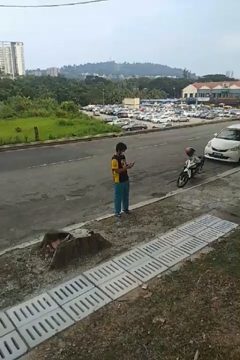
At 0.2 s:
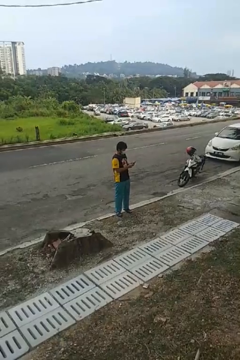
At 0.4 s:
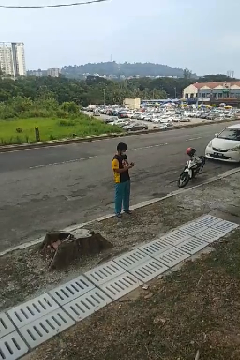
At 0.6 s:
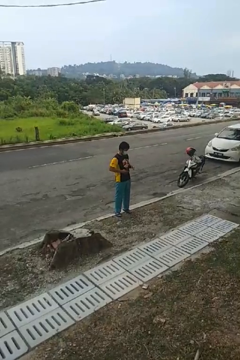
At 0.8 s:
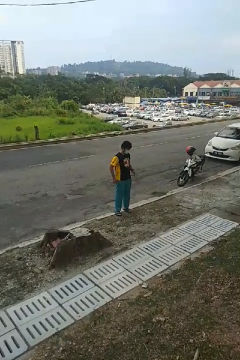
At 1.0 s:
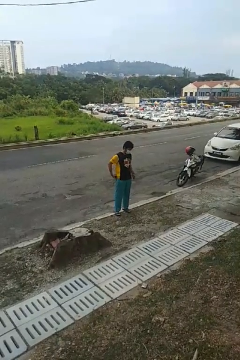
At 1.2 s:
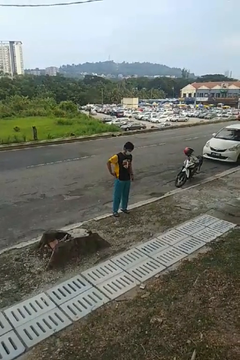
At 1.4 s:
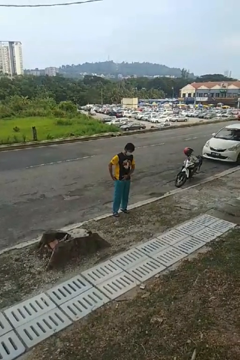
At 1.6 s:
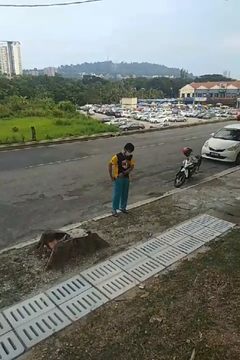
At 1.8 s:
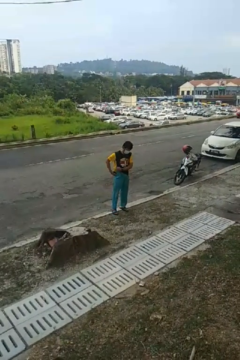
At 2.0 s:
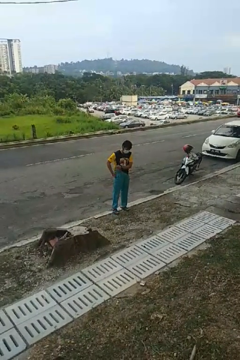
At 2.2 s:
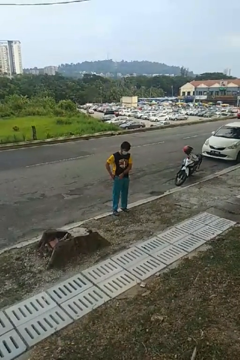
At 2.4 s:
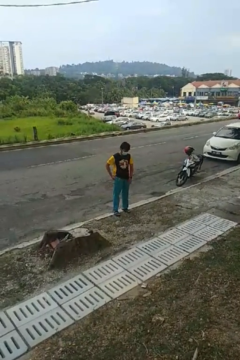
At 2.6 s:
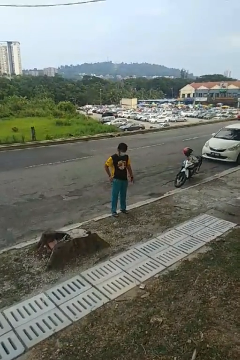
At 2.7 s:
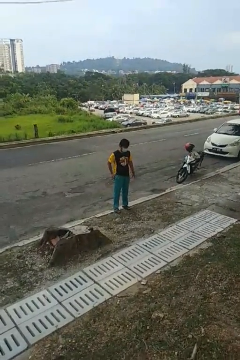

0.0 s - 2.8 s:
person puts phone into pocket

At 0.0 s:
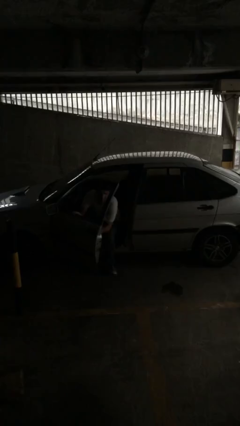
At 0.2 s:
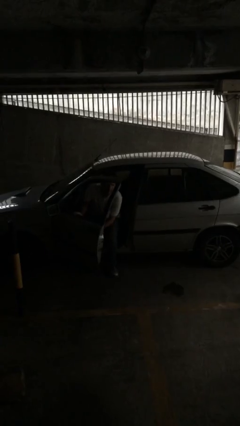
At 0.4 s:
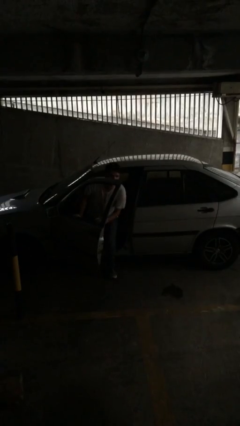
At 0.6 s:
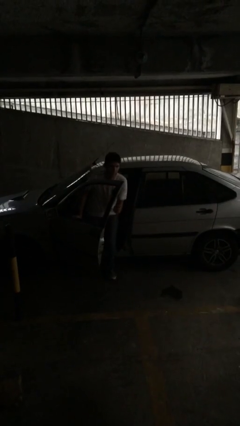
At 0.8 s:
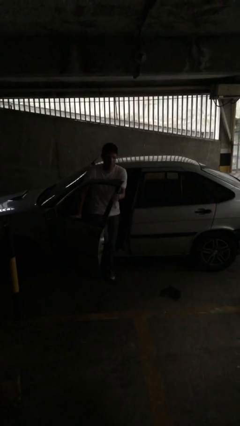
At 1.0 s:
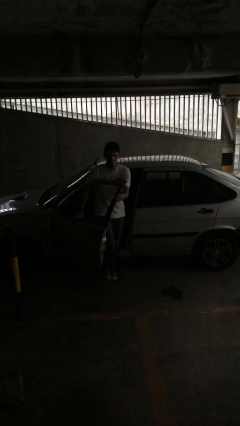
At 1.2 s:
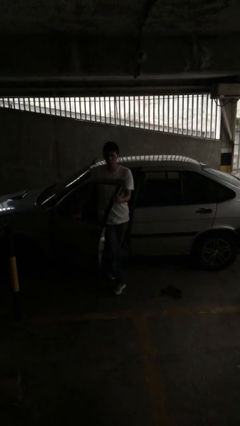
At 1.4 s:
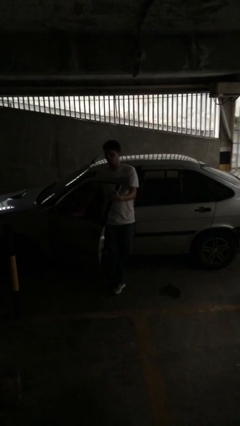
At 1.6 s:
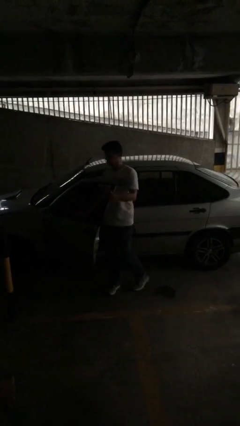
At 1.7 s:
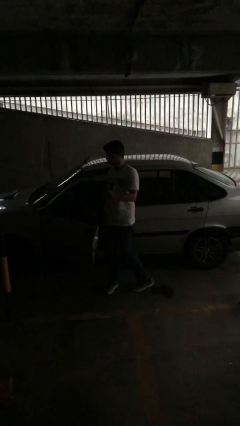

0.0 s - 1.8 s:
person exits car

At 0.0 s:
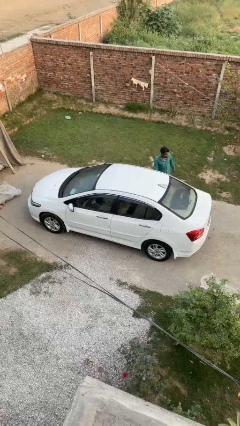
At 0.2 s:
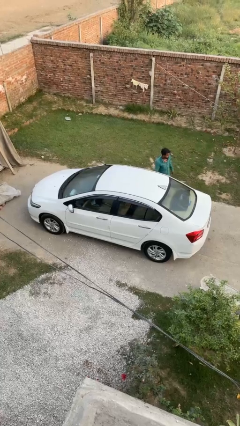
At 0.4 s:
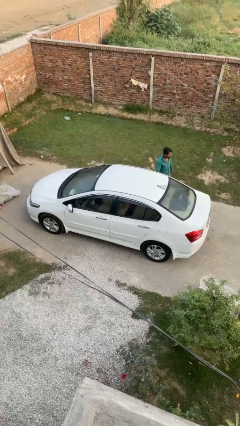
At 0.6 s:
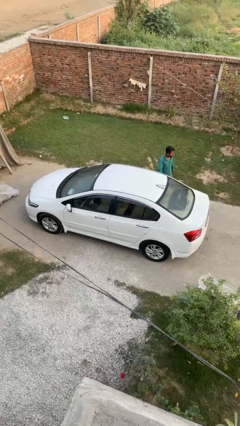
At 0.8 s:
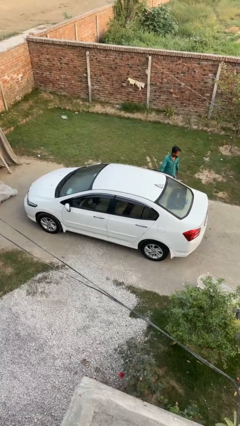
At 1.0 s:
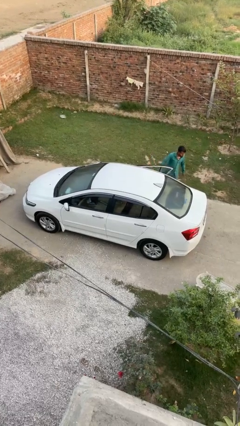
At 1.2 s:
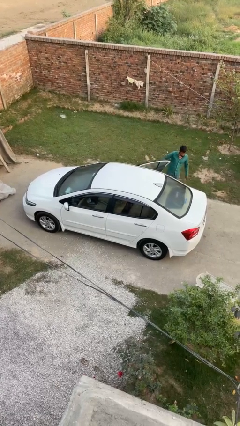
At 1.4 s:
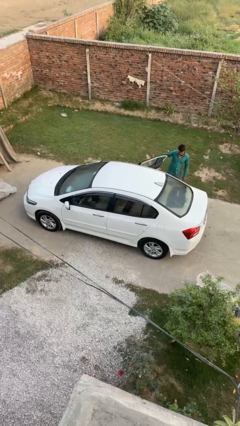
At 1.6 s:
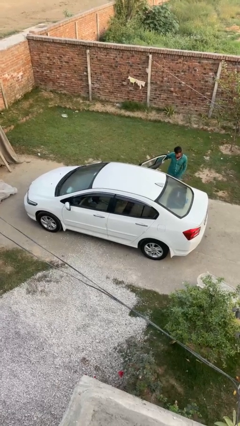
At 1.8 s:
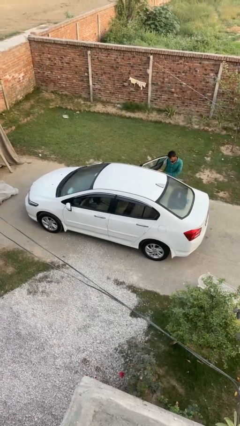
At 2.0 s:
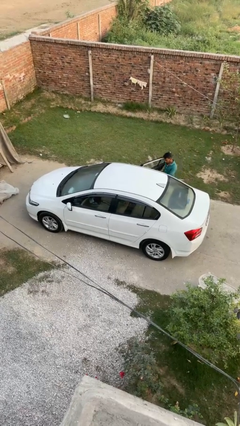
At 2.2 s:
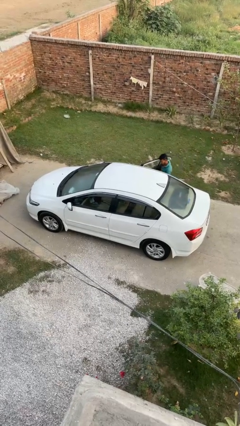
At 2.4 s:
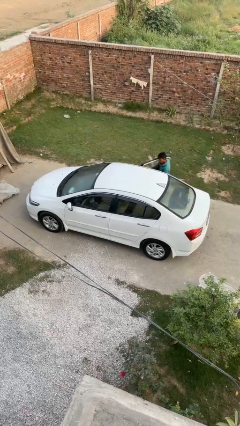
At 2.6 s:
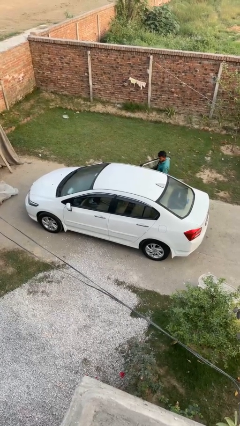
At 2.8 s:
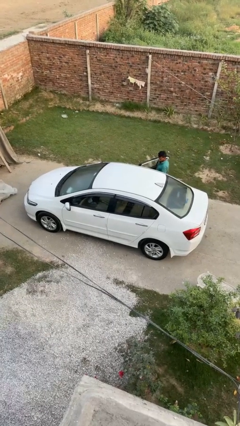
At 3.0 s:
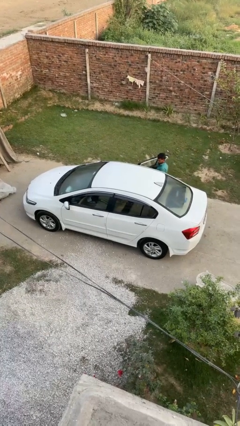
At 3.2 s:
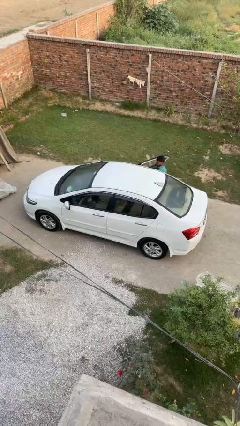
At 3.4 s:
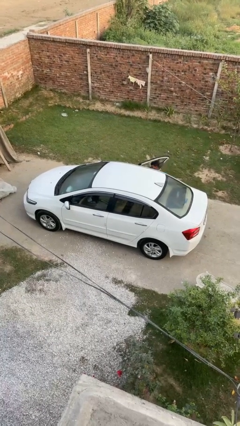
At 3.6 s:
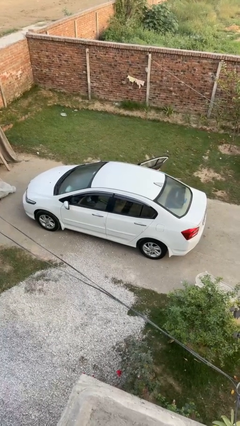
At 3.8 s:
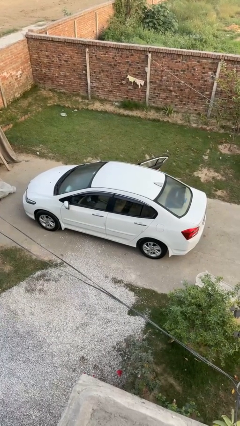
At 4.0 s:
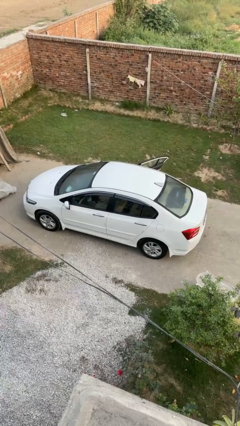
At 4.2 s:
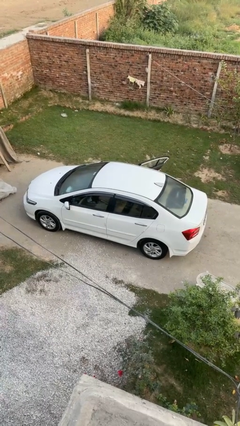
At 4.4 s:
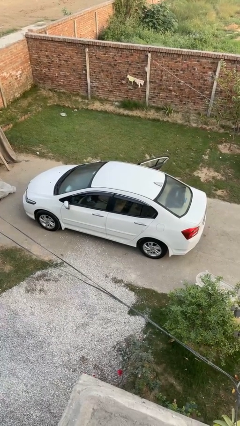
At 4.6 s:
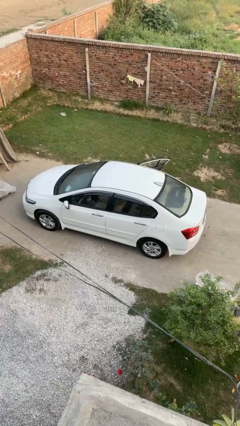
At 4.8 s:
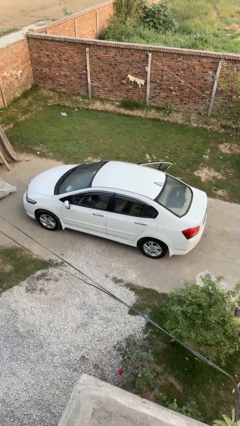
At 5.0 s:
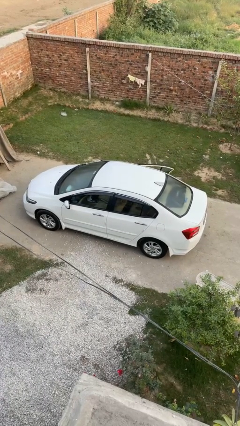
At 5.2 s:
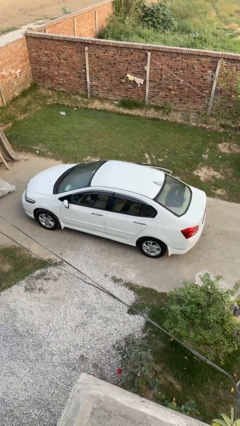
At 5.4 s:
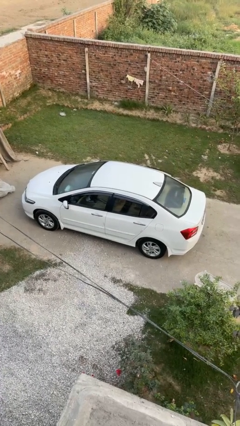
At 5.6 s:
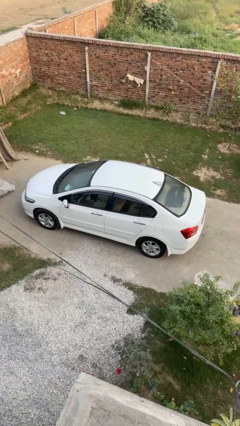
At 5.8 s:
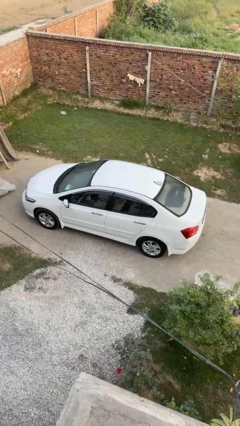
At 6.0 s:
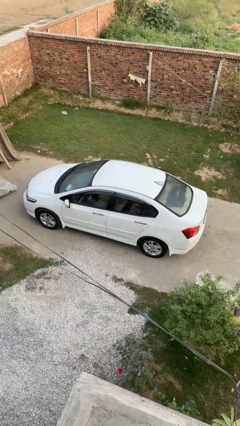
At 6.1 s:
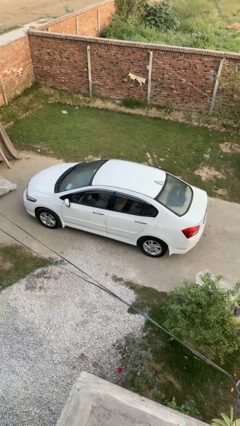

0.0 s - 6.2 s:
car picks up person

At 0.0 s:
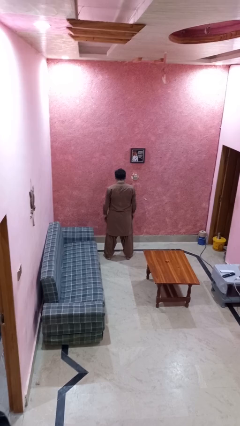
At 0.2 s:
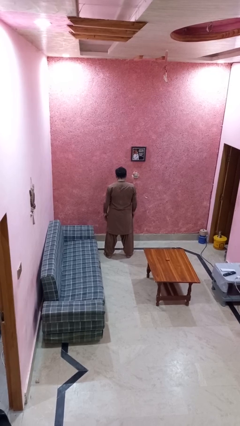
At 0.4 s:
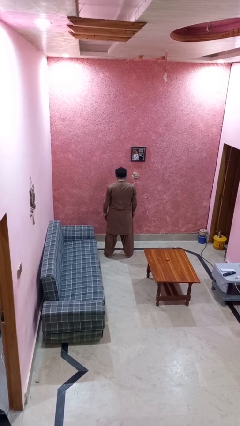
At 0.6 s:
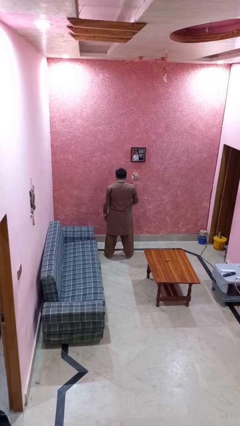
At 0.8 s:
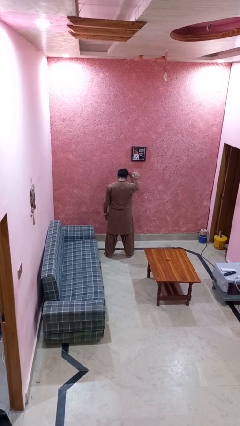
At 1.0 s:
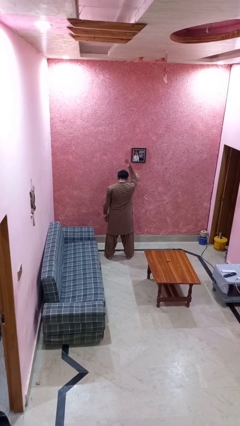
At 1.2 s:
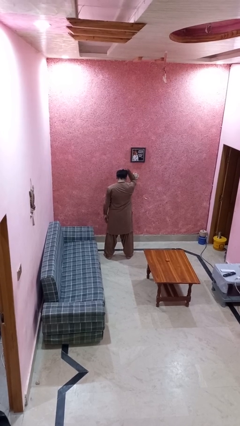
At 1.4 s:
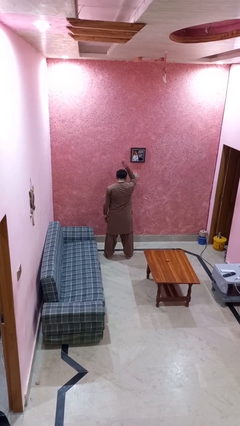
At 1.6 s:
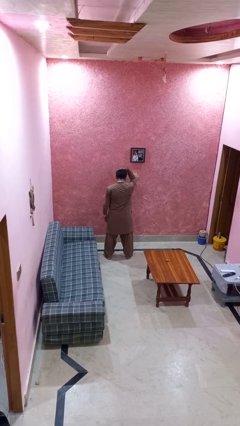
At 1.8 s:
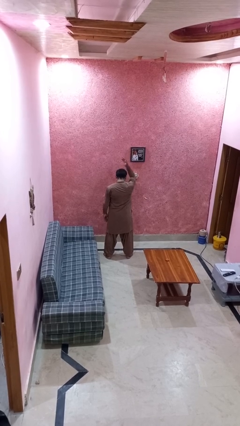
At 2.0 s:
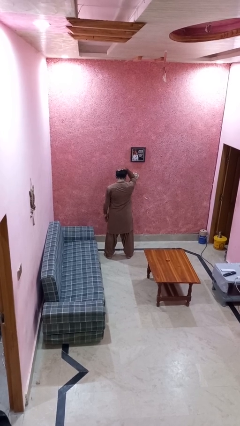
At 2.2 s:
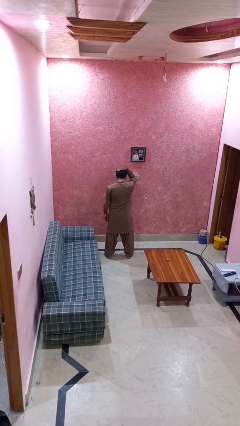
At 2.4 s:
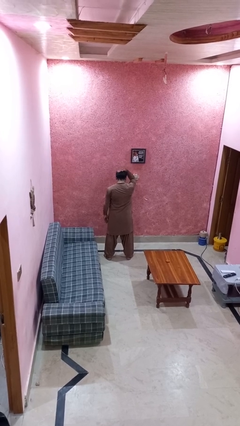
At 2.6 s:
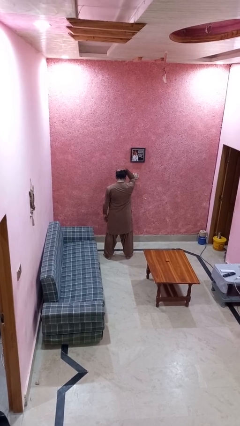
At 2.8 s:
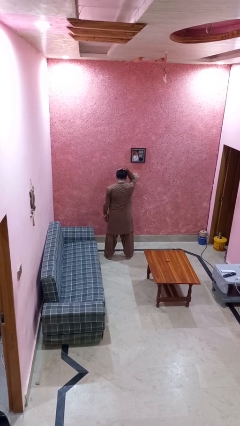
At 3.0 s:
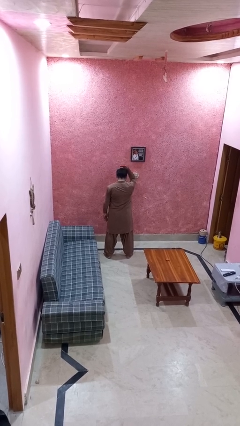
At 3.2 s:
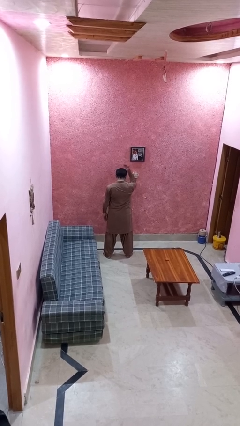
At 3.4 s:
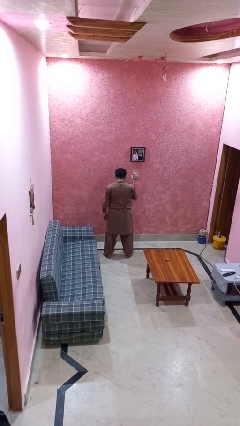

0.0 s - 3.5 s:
person pats head

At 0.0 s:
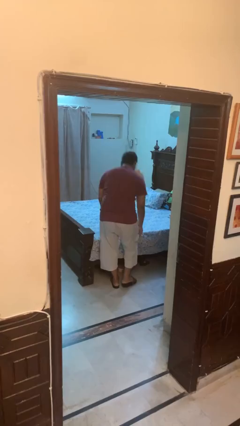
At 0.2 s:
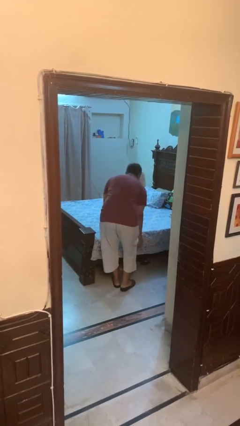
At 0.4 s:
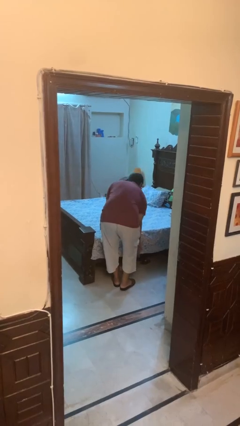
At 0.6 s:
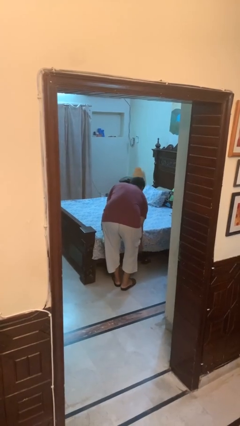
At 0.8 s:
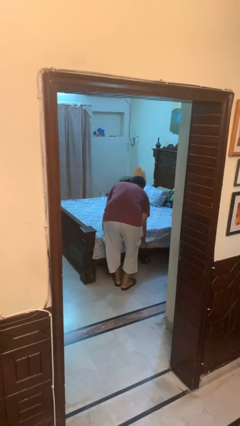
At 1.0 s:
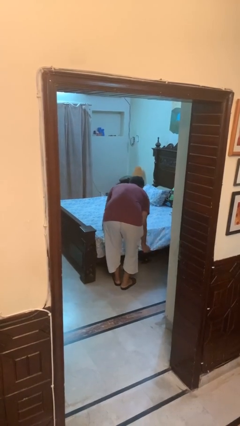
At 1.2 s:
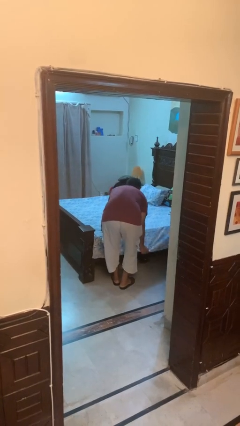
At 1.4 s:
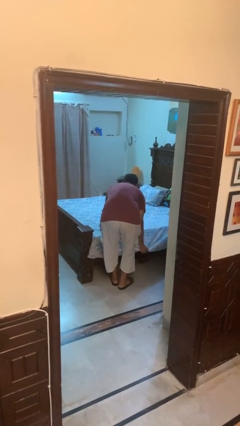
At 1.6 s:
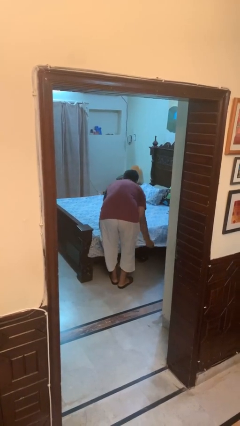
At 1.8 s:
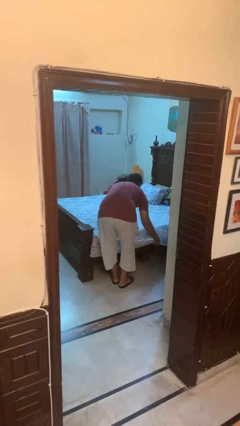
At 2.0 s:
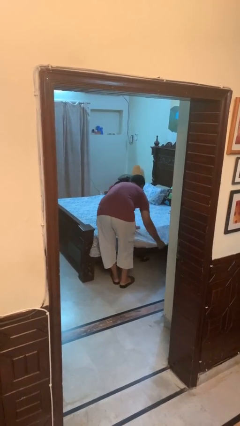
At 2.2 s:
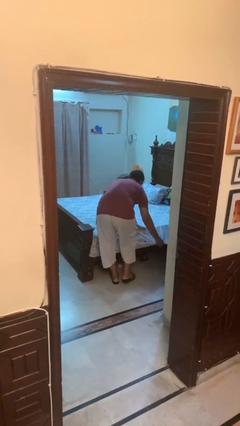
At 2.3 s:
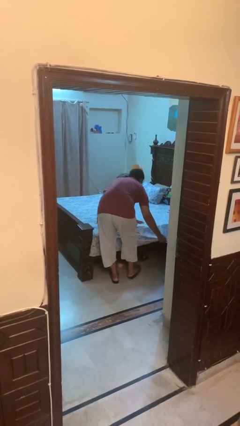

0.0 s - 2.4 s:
person makes bed

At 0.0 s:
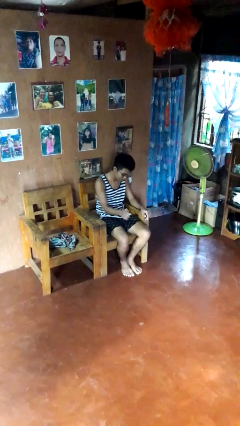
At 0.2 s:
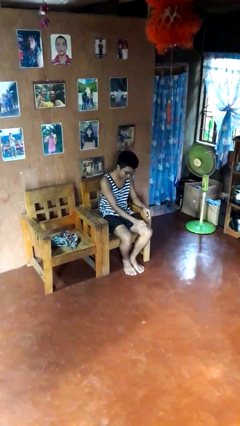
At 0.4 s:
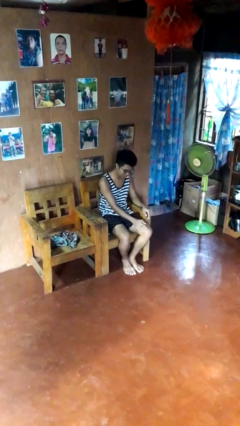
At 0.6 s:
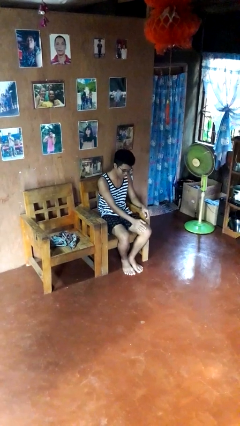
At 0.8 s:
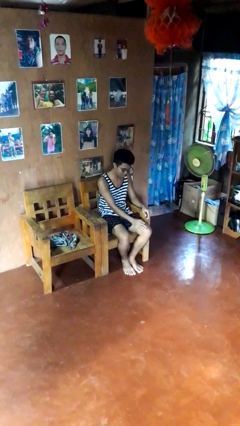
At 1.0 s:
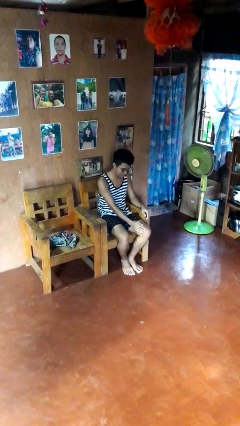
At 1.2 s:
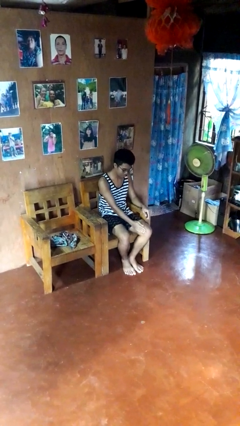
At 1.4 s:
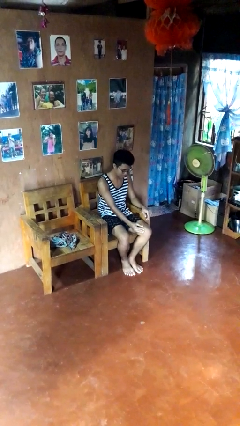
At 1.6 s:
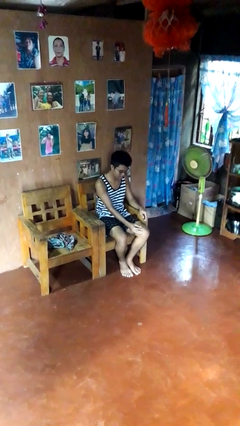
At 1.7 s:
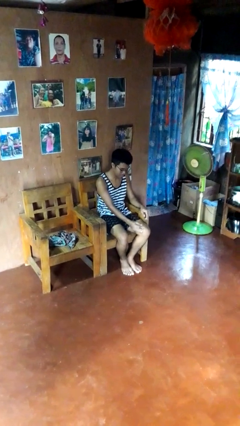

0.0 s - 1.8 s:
person swats bug
